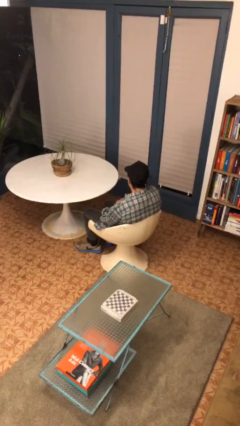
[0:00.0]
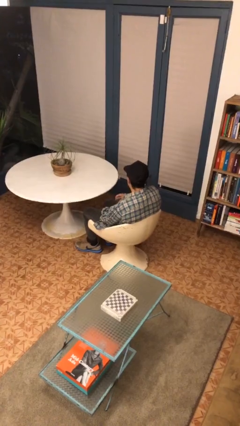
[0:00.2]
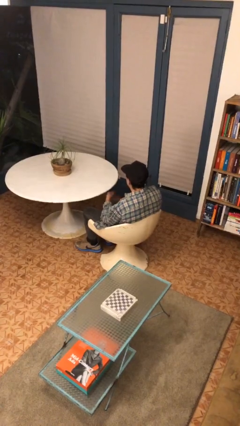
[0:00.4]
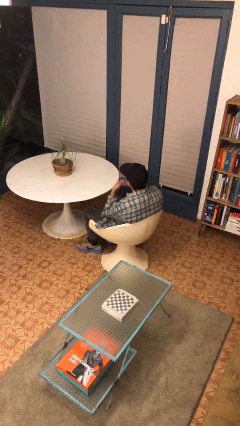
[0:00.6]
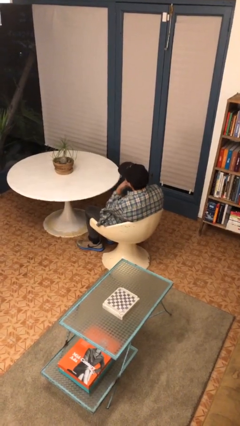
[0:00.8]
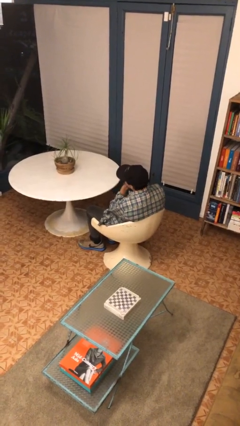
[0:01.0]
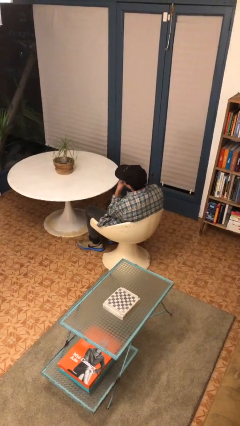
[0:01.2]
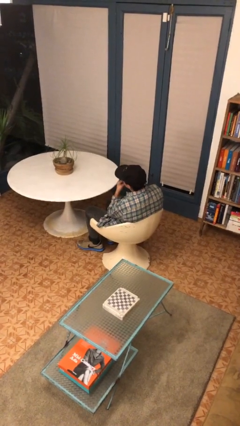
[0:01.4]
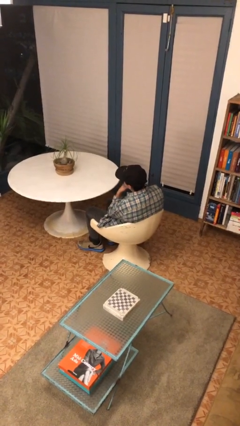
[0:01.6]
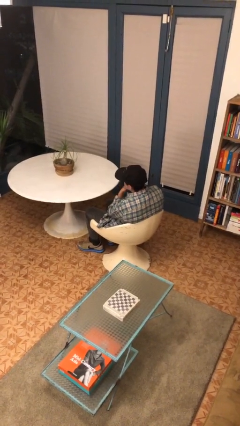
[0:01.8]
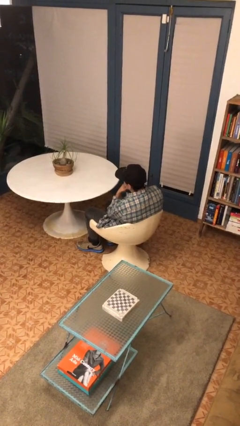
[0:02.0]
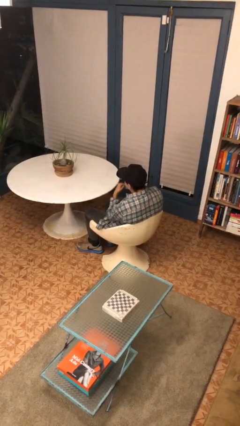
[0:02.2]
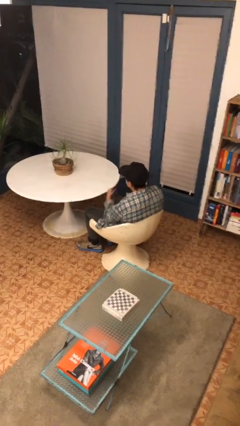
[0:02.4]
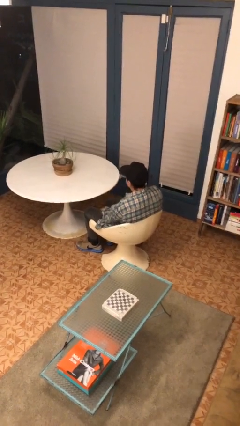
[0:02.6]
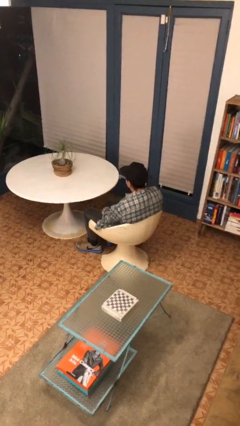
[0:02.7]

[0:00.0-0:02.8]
person strokes chin

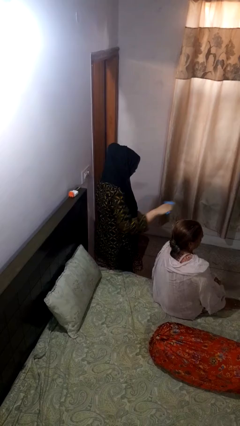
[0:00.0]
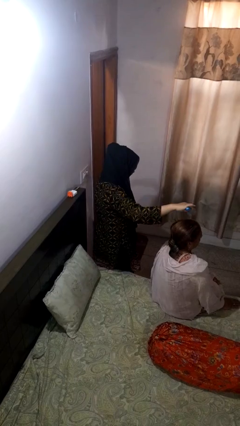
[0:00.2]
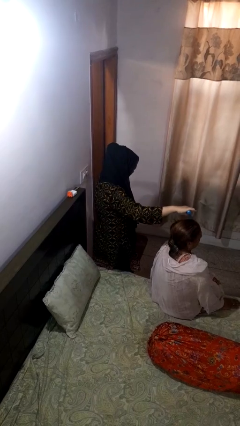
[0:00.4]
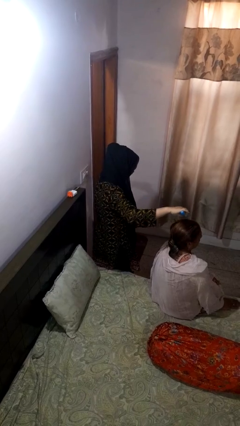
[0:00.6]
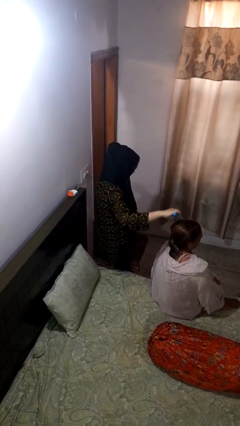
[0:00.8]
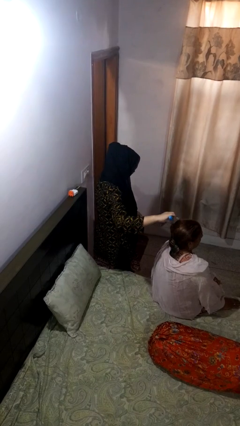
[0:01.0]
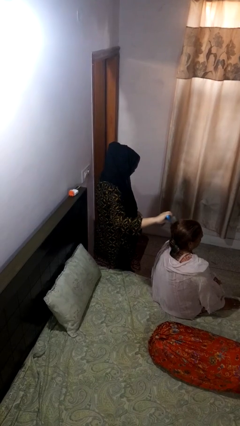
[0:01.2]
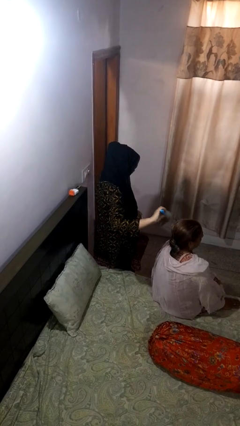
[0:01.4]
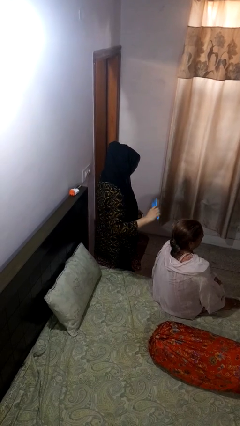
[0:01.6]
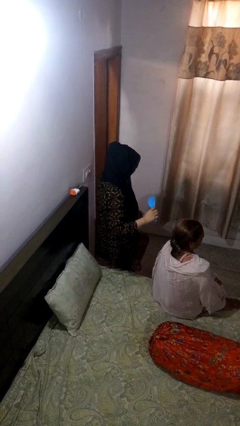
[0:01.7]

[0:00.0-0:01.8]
person brushes hair of person

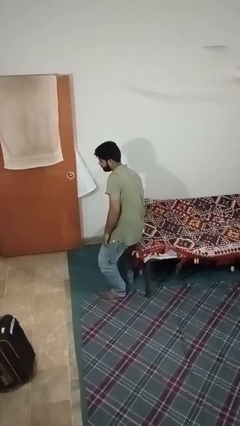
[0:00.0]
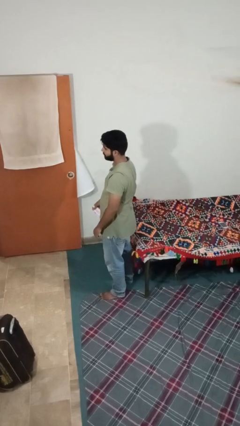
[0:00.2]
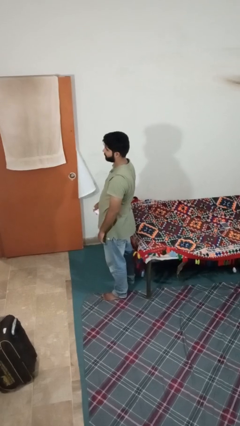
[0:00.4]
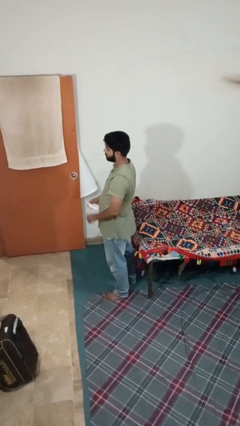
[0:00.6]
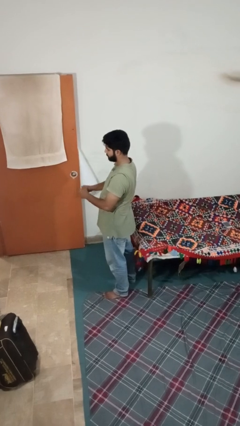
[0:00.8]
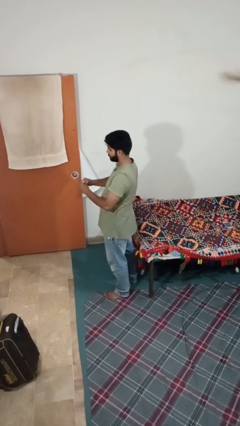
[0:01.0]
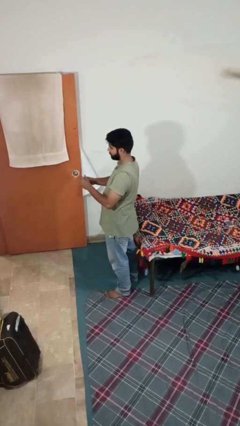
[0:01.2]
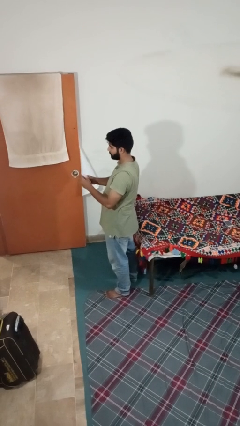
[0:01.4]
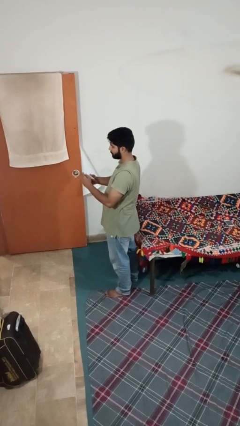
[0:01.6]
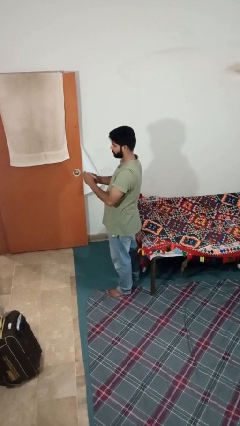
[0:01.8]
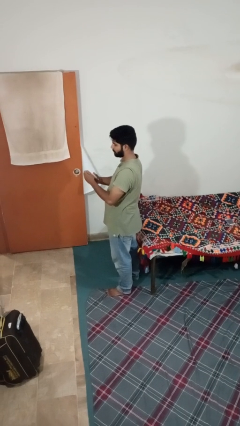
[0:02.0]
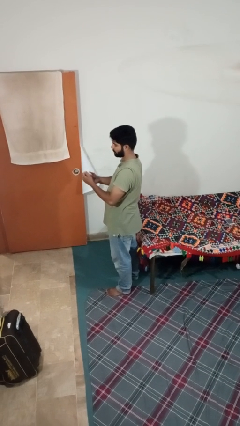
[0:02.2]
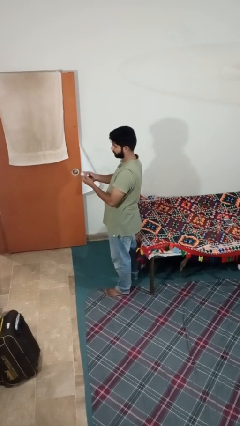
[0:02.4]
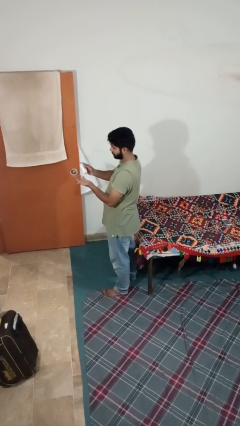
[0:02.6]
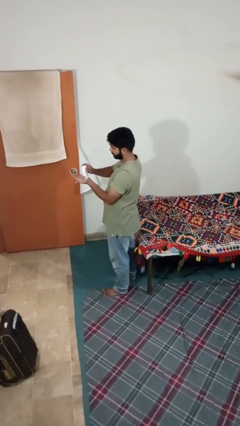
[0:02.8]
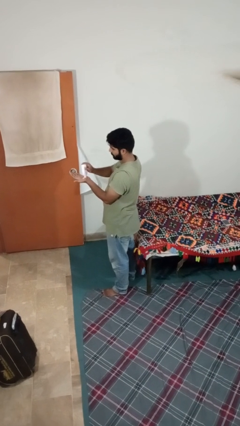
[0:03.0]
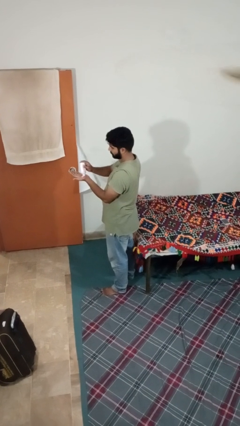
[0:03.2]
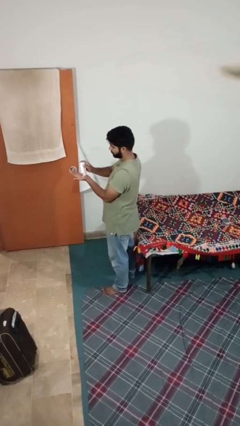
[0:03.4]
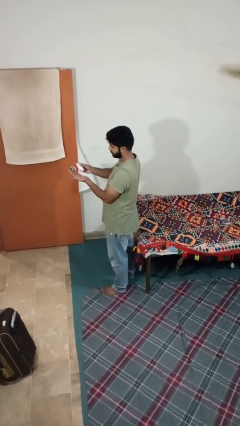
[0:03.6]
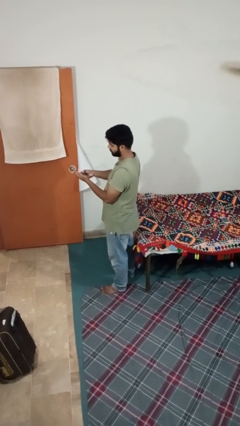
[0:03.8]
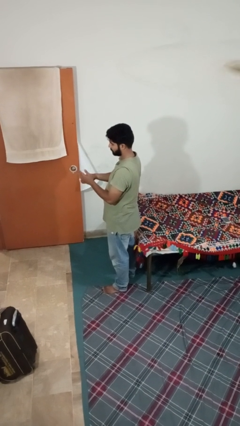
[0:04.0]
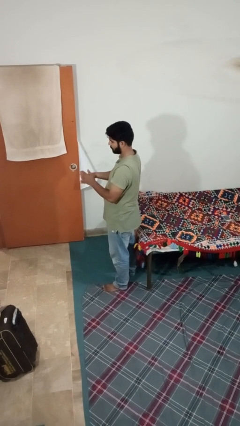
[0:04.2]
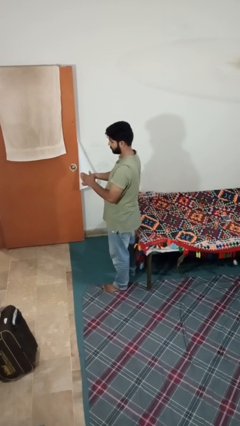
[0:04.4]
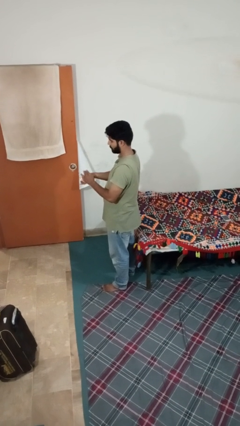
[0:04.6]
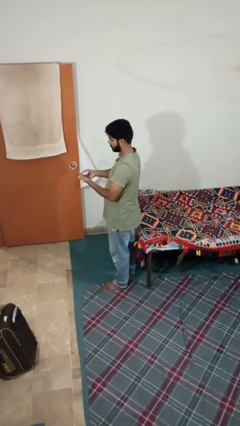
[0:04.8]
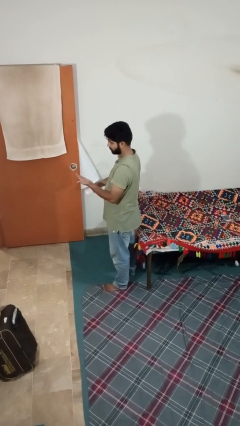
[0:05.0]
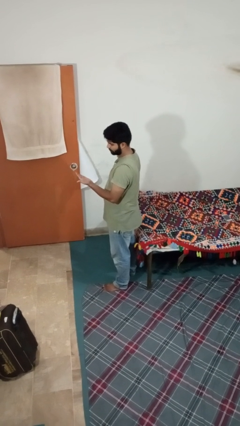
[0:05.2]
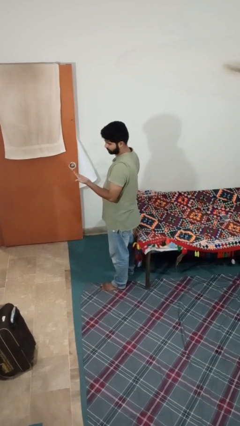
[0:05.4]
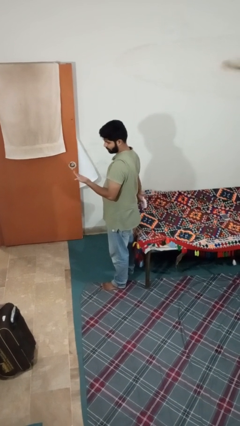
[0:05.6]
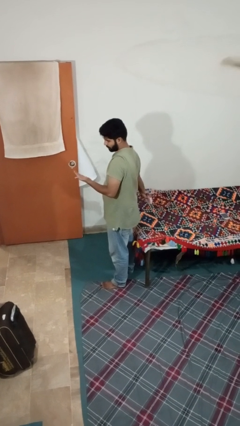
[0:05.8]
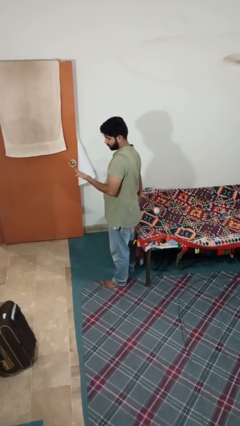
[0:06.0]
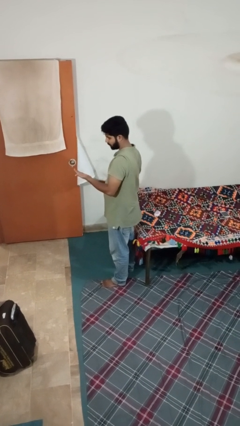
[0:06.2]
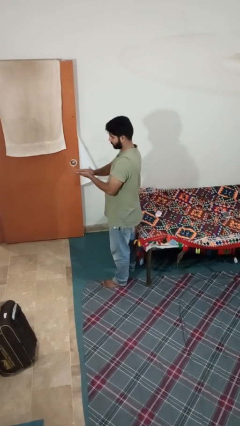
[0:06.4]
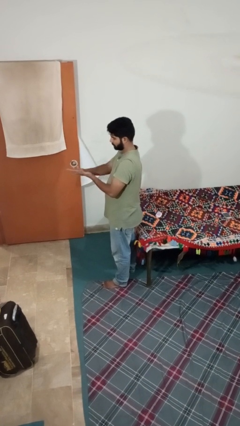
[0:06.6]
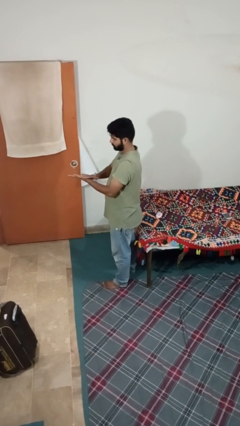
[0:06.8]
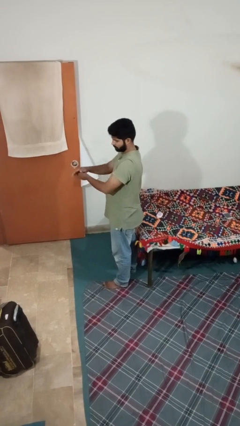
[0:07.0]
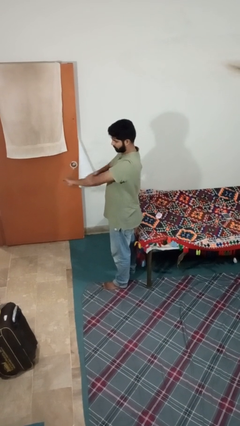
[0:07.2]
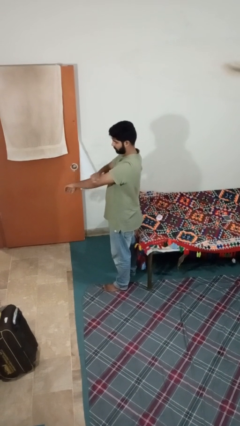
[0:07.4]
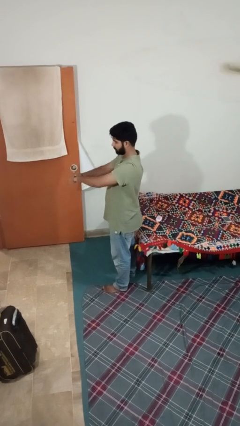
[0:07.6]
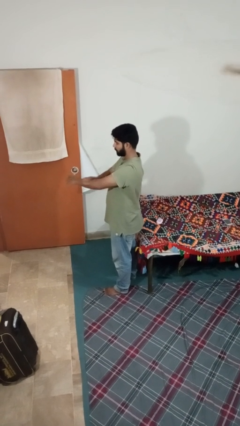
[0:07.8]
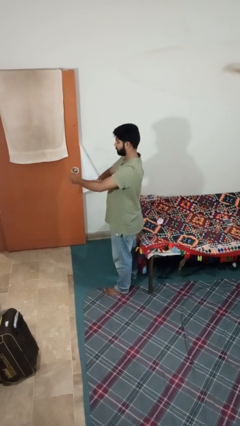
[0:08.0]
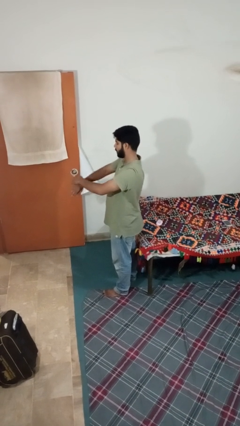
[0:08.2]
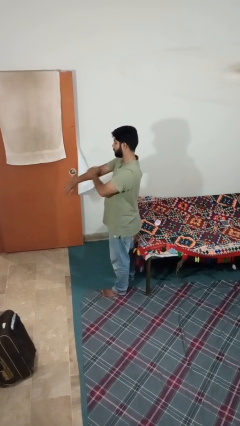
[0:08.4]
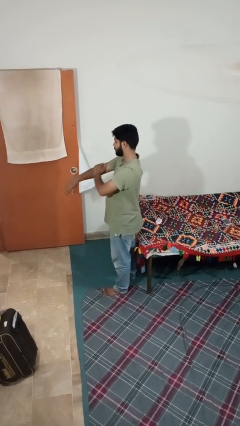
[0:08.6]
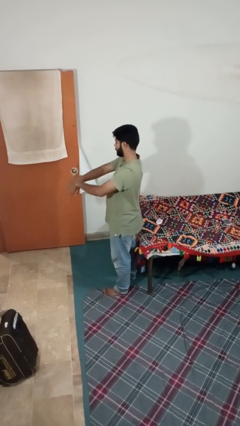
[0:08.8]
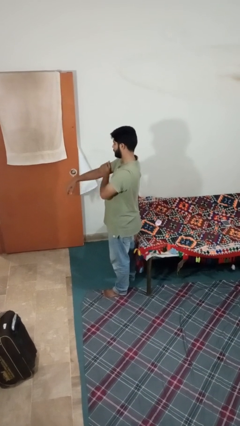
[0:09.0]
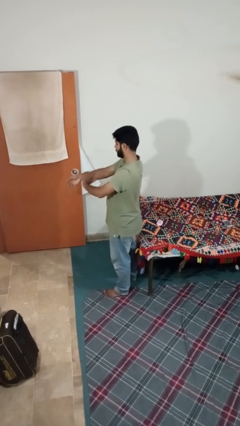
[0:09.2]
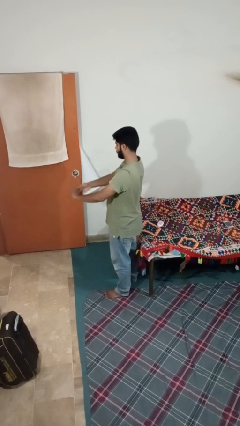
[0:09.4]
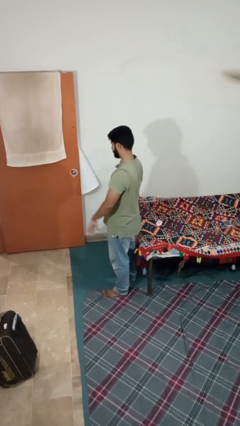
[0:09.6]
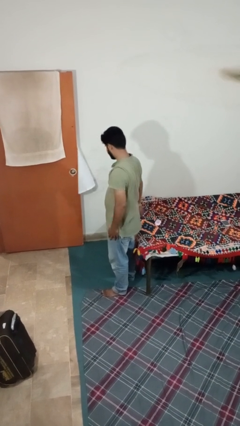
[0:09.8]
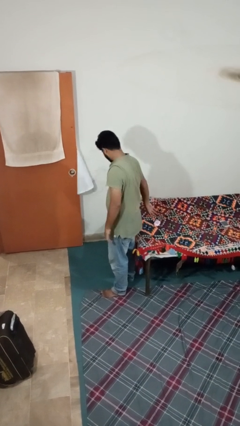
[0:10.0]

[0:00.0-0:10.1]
person applies sunscreen

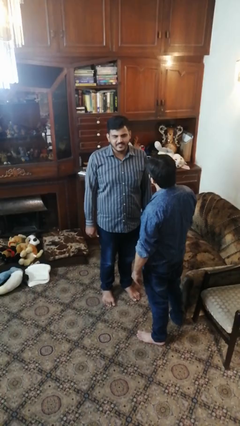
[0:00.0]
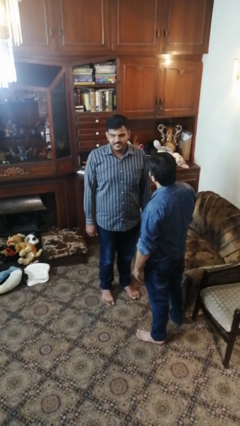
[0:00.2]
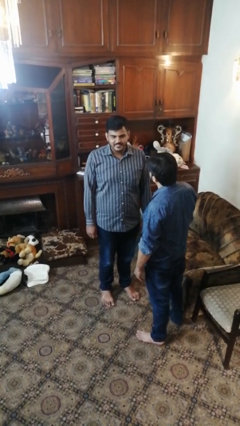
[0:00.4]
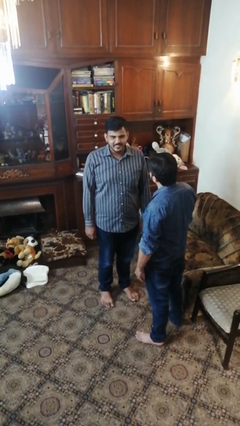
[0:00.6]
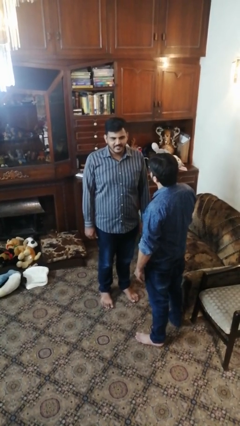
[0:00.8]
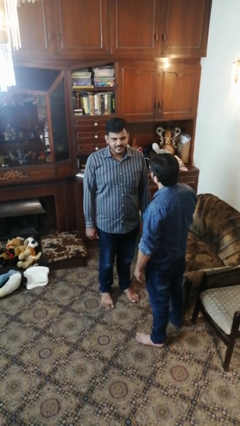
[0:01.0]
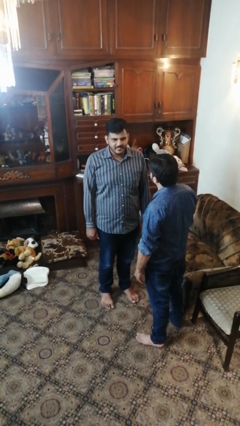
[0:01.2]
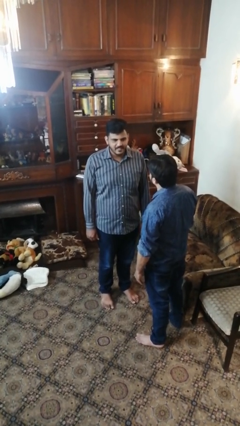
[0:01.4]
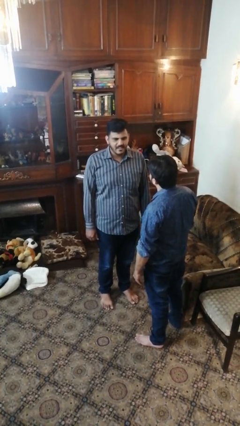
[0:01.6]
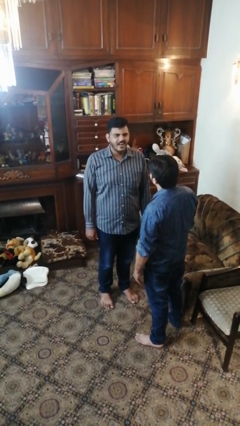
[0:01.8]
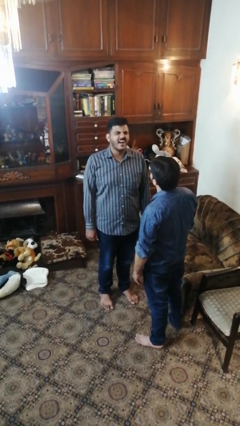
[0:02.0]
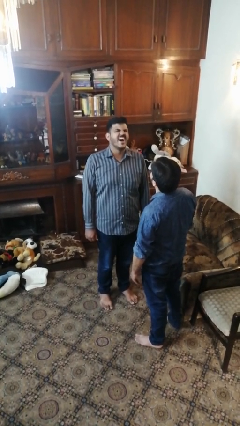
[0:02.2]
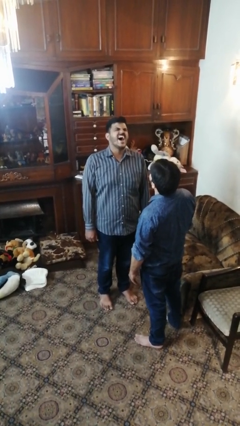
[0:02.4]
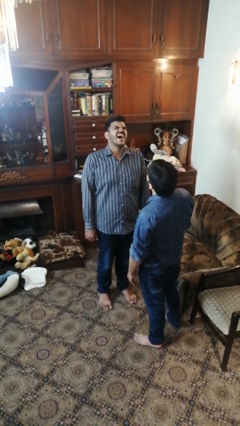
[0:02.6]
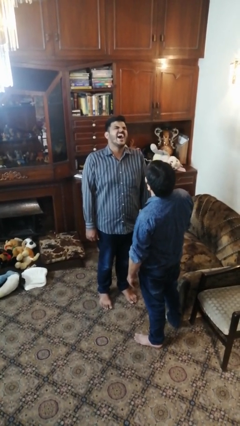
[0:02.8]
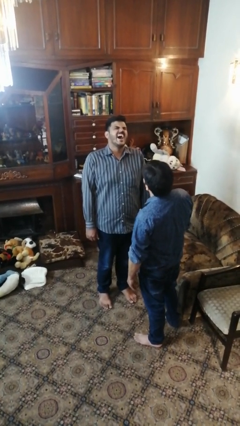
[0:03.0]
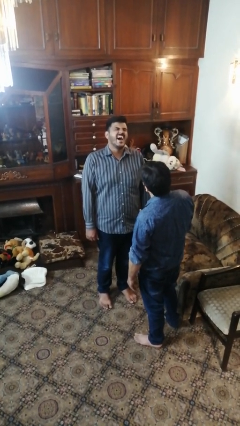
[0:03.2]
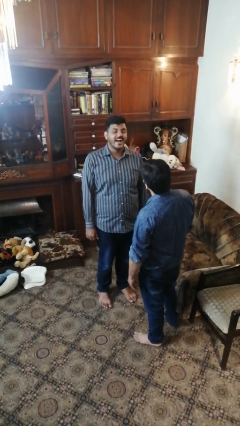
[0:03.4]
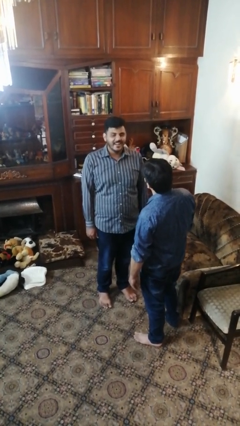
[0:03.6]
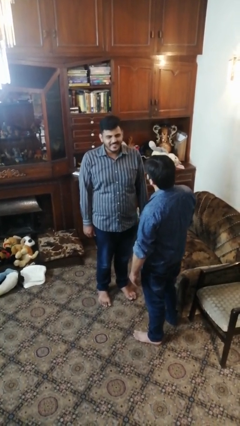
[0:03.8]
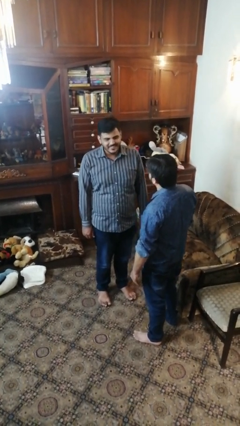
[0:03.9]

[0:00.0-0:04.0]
person laughs with person
